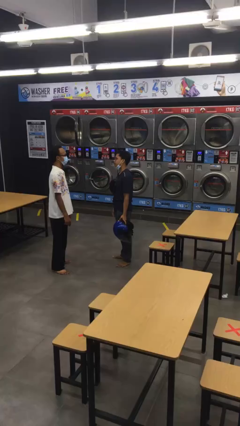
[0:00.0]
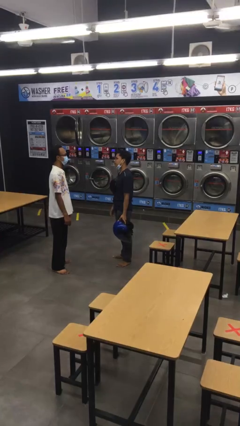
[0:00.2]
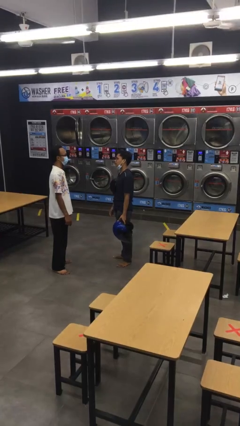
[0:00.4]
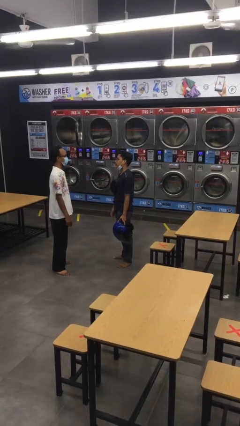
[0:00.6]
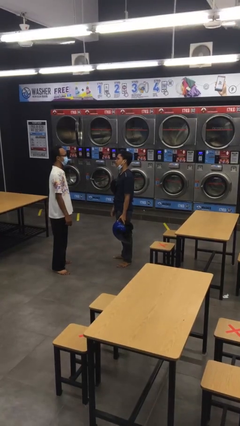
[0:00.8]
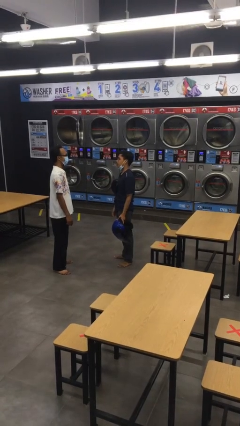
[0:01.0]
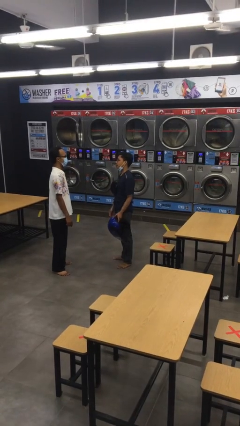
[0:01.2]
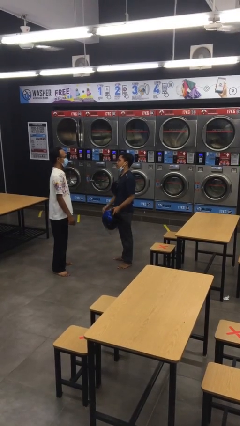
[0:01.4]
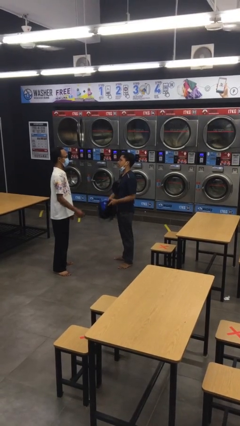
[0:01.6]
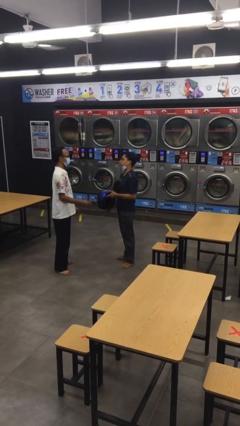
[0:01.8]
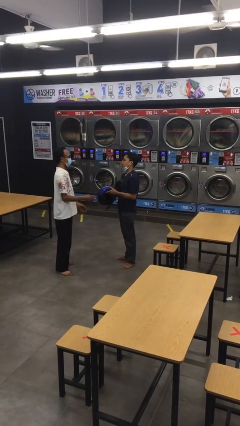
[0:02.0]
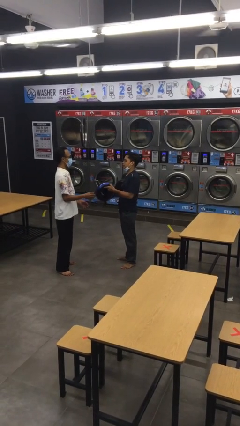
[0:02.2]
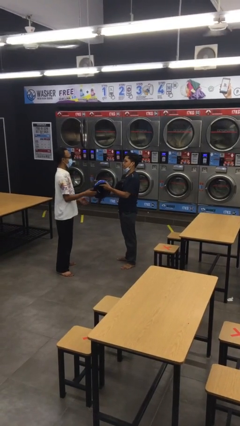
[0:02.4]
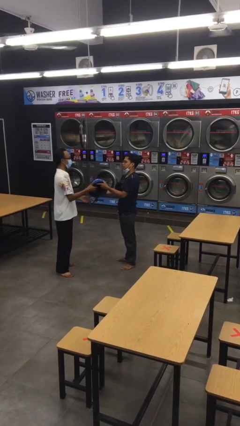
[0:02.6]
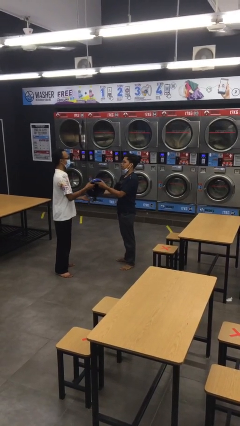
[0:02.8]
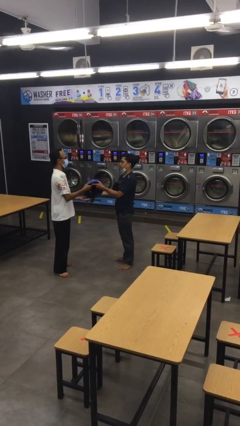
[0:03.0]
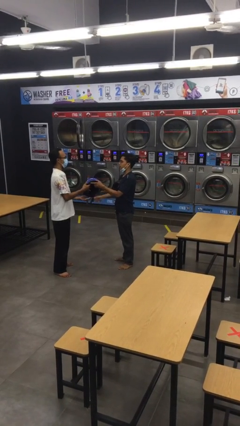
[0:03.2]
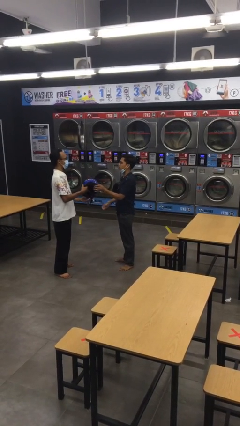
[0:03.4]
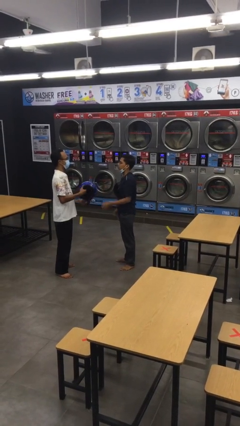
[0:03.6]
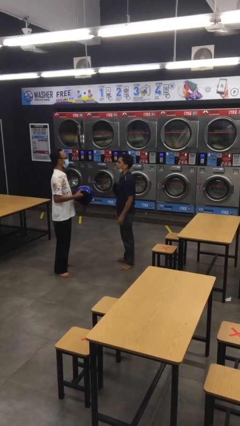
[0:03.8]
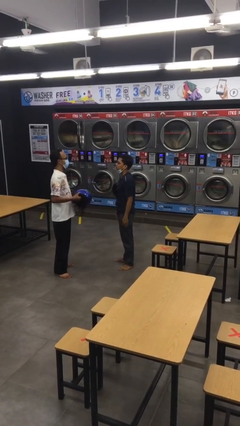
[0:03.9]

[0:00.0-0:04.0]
person transfers object to person

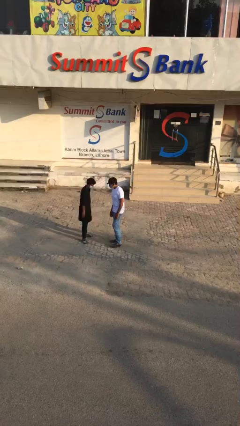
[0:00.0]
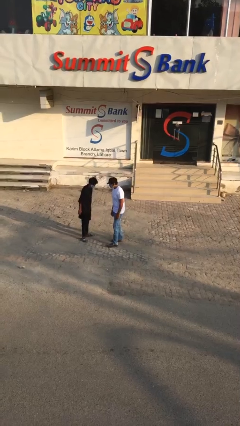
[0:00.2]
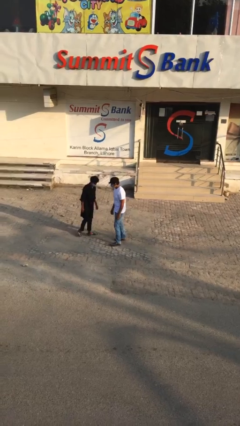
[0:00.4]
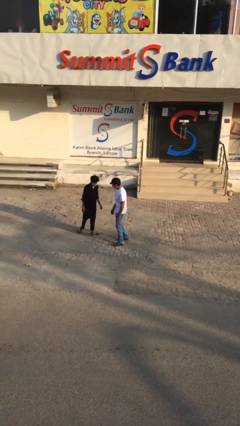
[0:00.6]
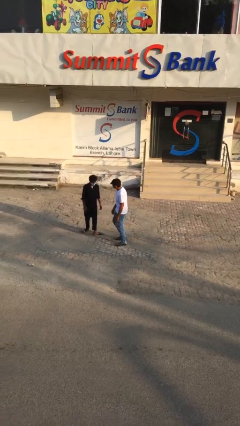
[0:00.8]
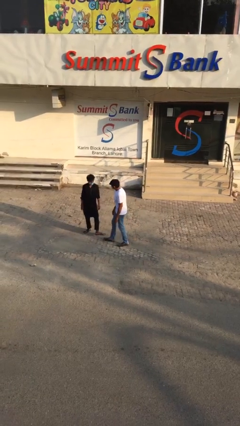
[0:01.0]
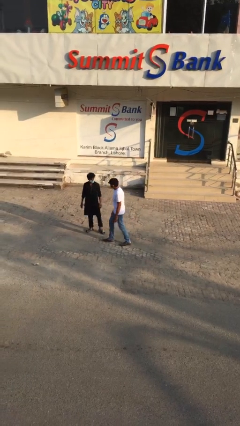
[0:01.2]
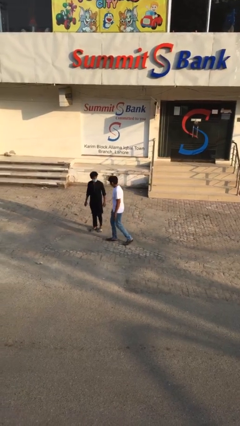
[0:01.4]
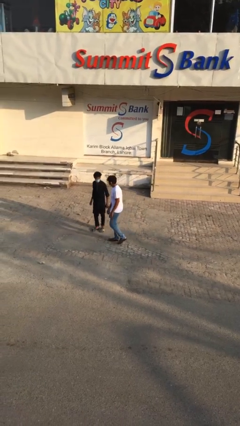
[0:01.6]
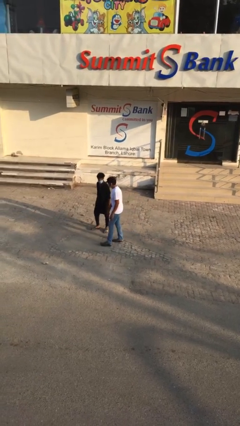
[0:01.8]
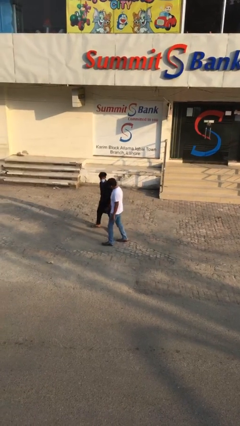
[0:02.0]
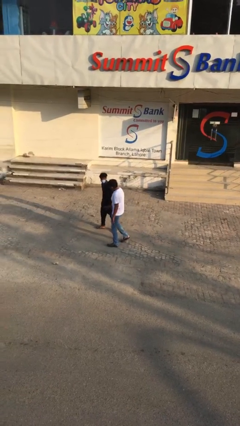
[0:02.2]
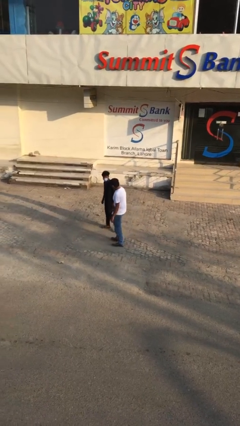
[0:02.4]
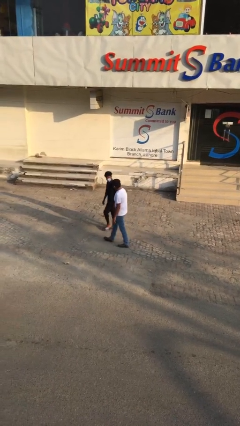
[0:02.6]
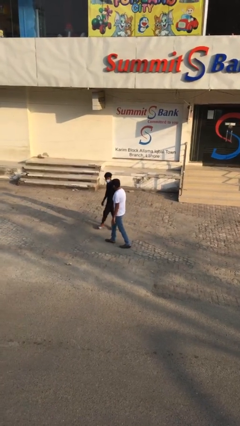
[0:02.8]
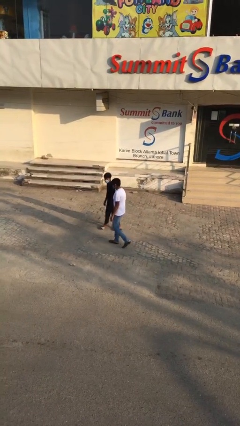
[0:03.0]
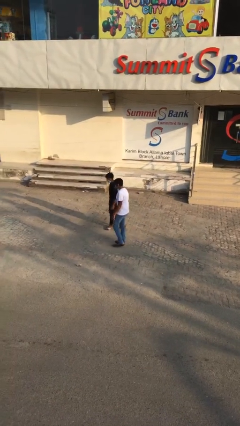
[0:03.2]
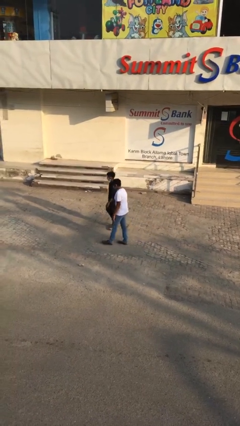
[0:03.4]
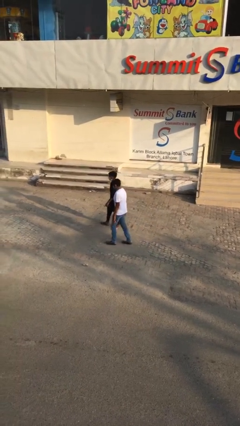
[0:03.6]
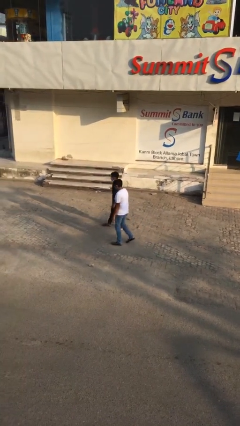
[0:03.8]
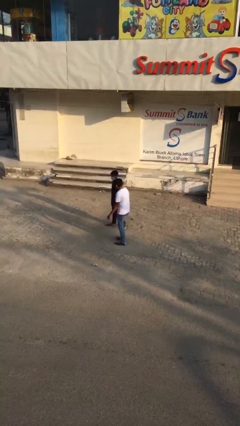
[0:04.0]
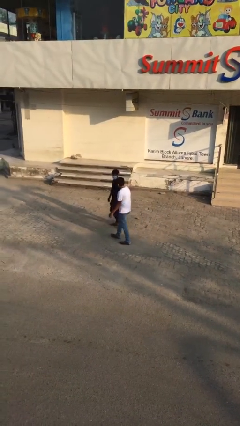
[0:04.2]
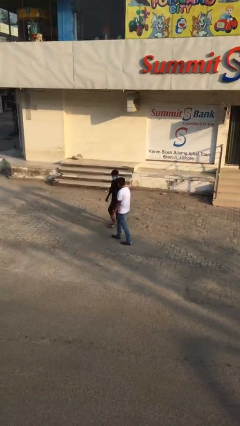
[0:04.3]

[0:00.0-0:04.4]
person talks to person

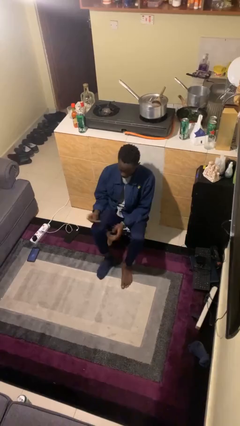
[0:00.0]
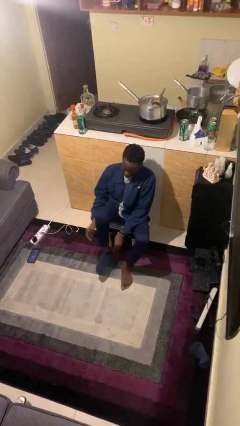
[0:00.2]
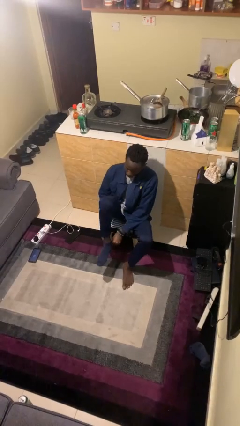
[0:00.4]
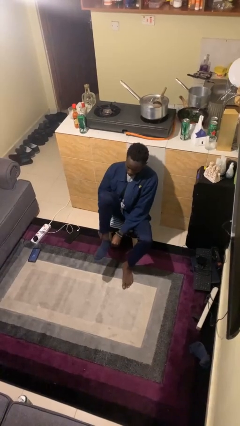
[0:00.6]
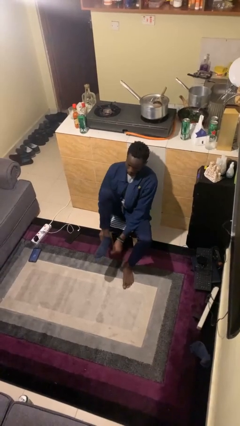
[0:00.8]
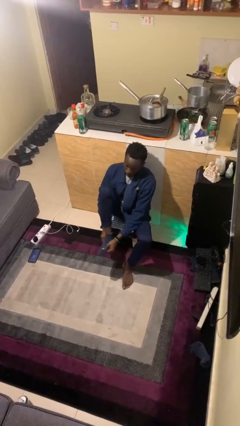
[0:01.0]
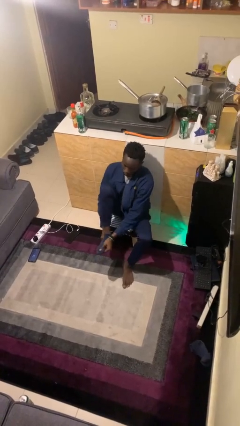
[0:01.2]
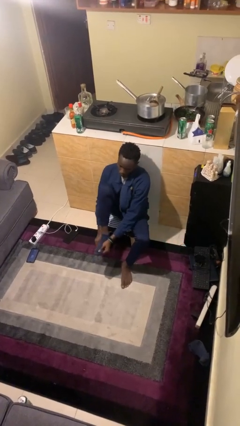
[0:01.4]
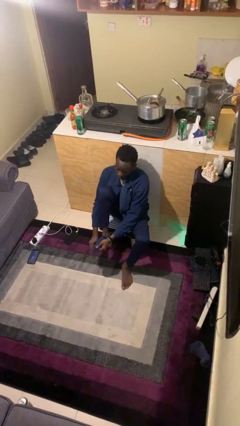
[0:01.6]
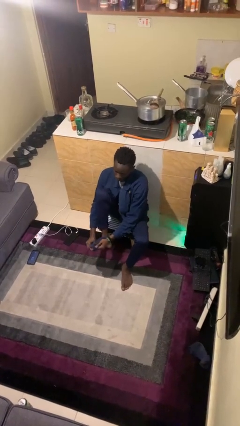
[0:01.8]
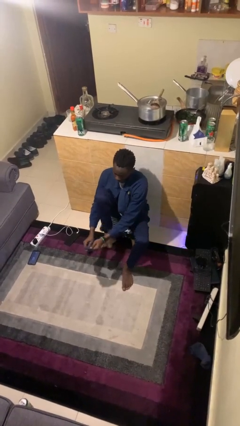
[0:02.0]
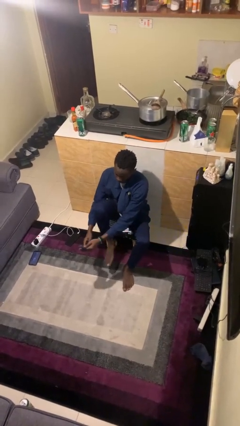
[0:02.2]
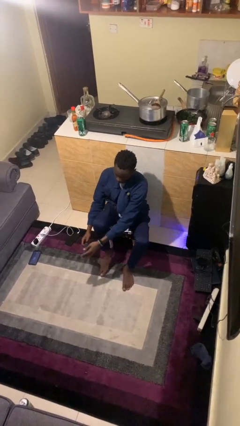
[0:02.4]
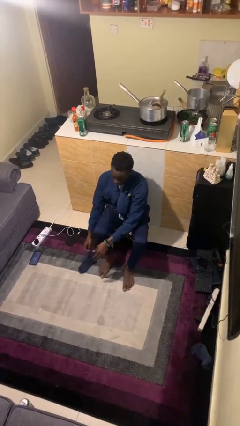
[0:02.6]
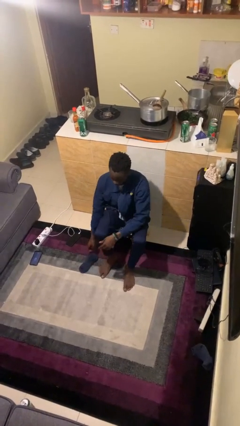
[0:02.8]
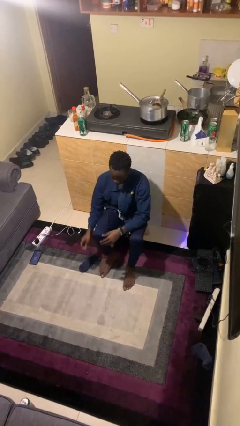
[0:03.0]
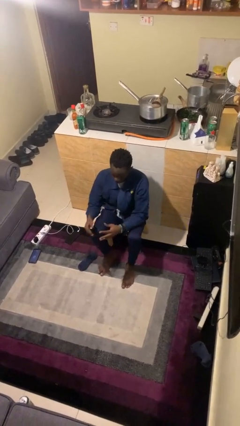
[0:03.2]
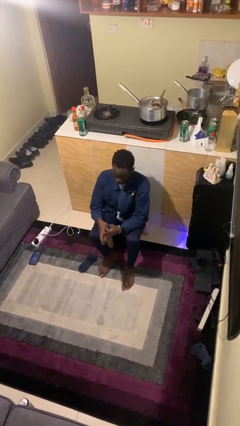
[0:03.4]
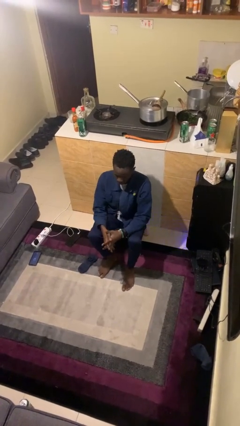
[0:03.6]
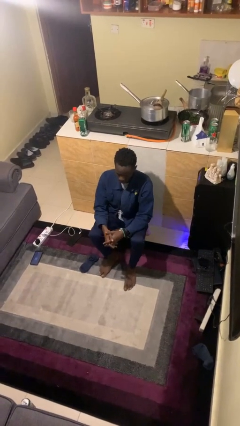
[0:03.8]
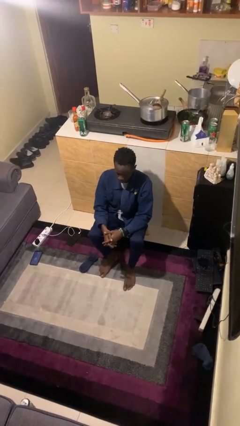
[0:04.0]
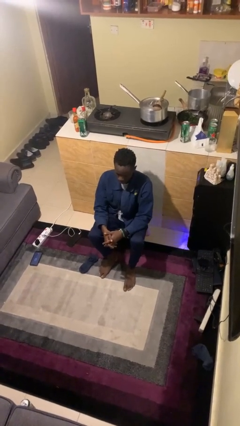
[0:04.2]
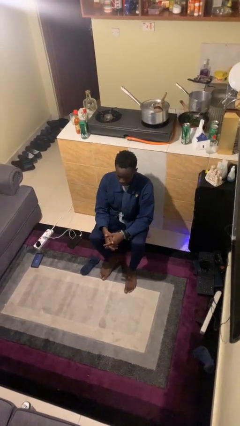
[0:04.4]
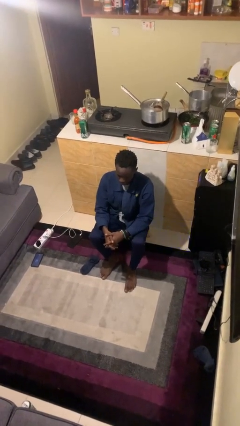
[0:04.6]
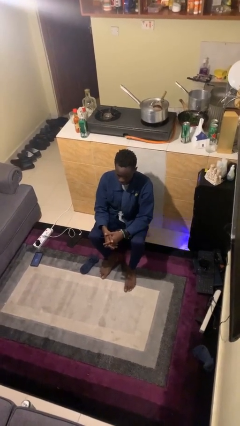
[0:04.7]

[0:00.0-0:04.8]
person takes off socks

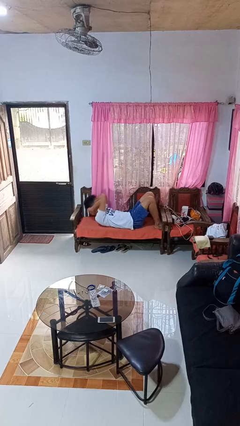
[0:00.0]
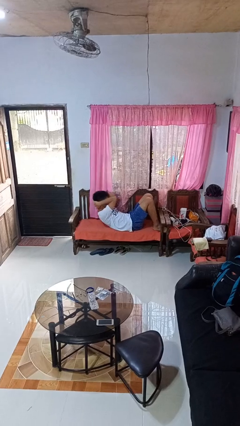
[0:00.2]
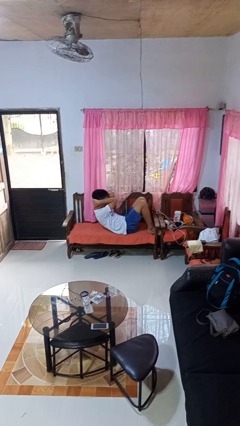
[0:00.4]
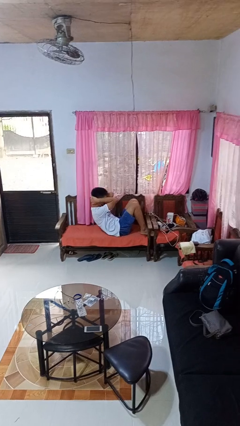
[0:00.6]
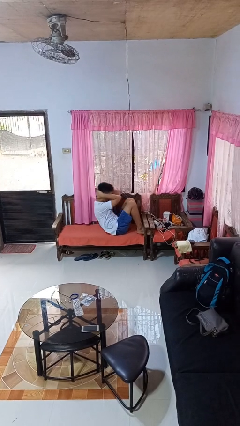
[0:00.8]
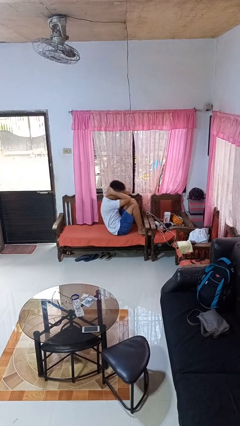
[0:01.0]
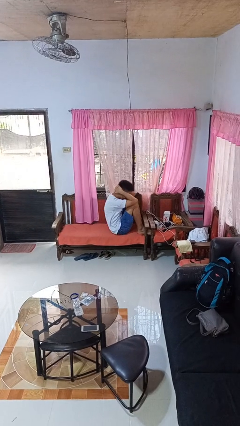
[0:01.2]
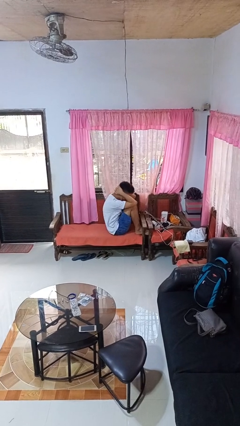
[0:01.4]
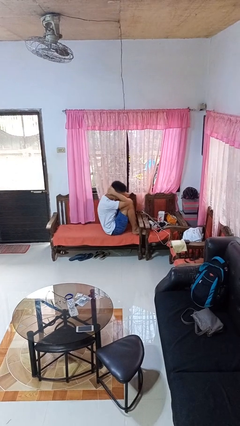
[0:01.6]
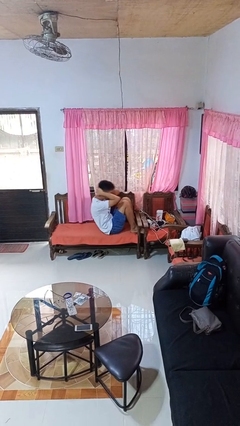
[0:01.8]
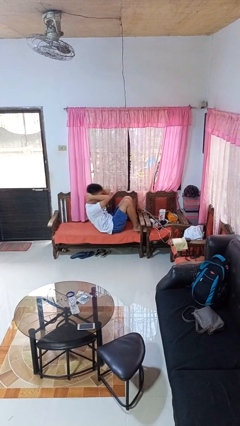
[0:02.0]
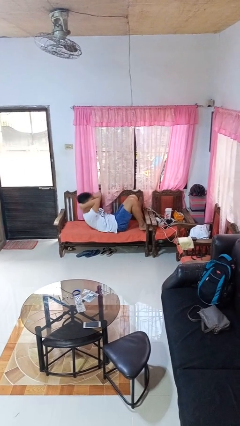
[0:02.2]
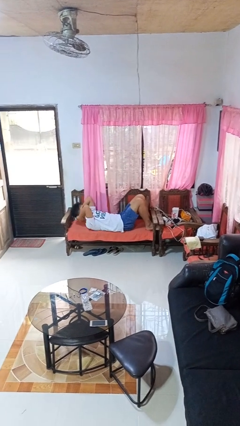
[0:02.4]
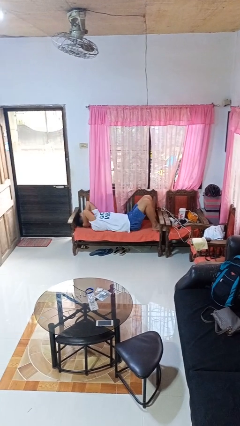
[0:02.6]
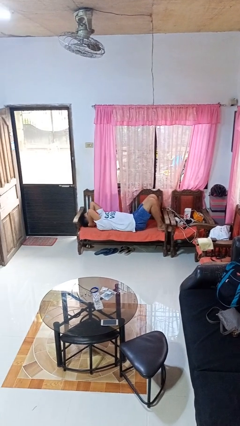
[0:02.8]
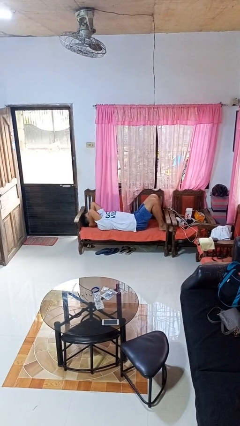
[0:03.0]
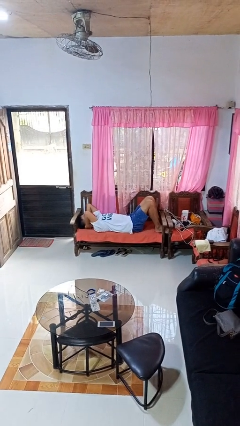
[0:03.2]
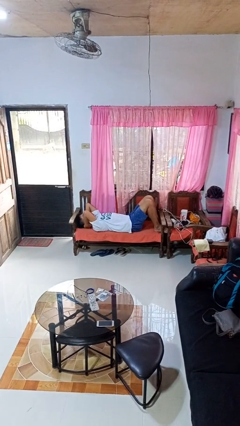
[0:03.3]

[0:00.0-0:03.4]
person exercises with situp

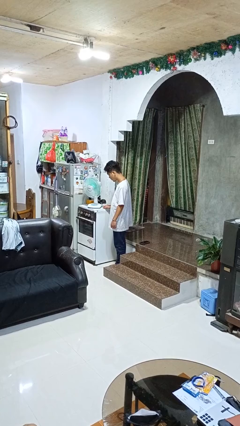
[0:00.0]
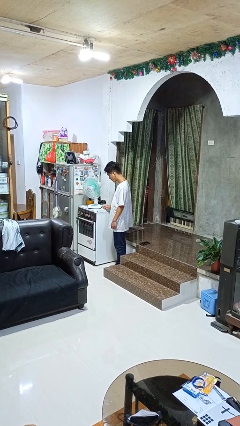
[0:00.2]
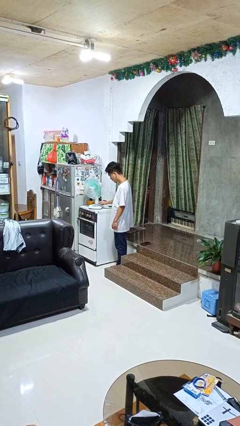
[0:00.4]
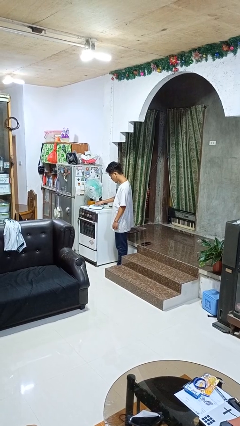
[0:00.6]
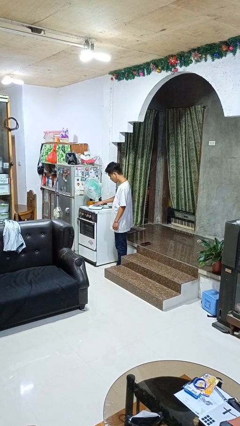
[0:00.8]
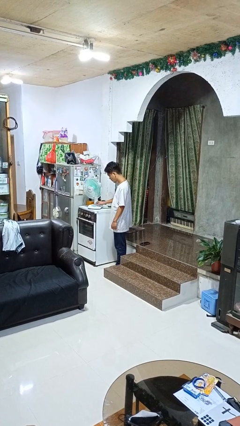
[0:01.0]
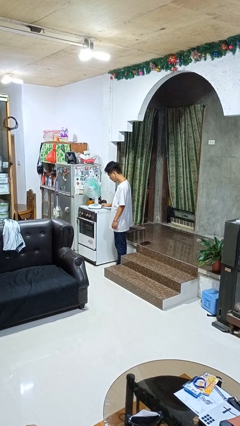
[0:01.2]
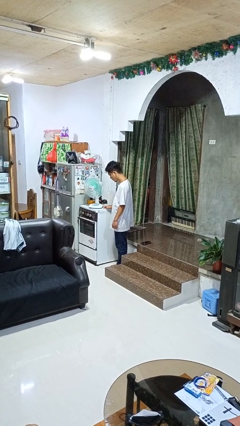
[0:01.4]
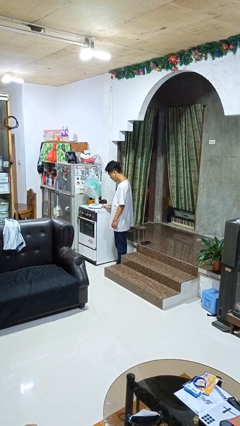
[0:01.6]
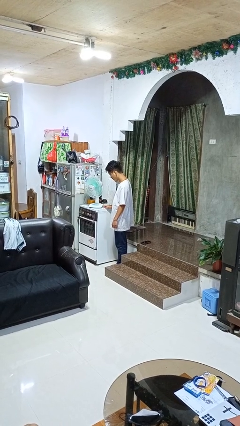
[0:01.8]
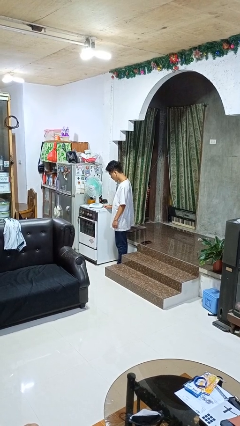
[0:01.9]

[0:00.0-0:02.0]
person turns off fan
